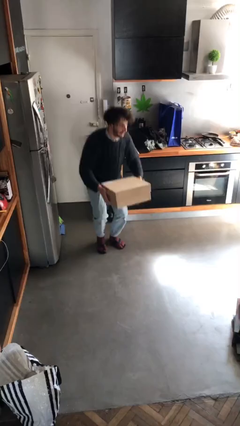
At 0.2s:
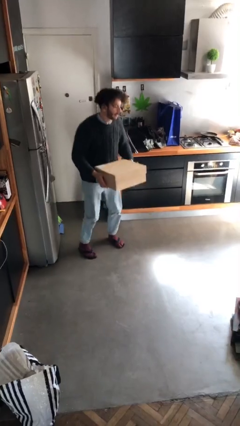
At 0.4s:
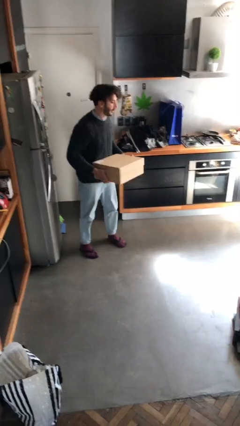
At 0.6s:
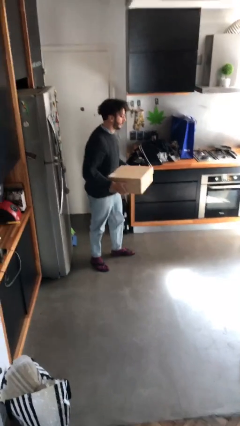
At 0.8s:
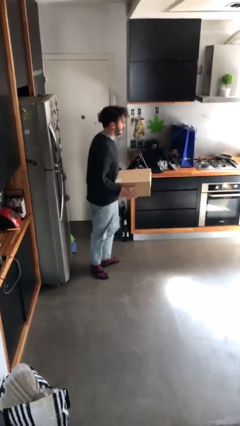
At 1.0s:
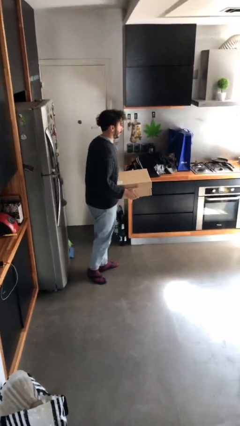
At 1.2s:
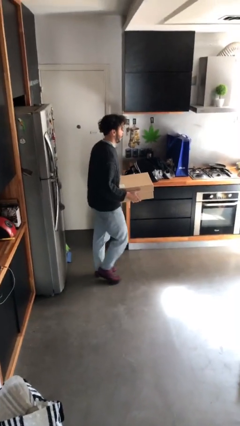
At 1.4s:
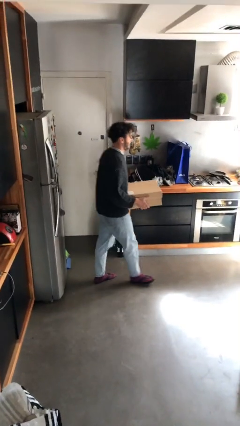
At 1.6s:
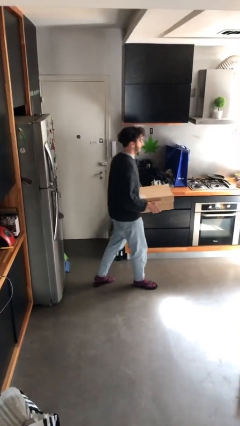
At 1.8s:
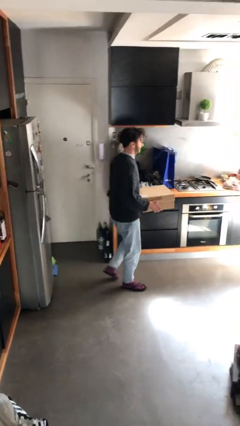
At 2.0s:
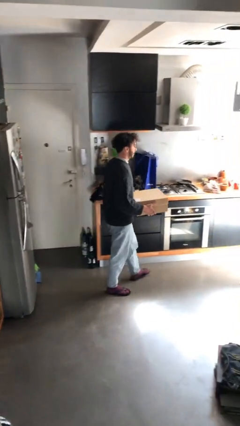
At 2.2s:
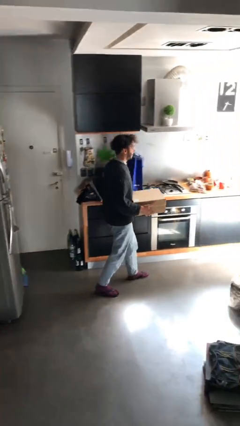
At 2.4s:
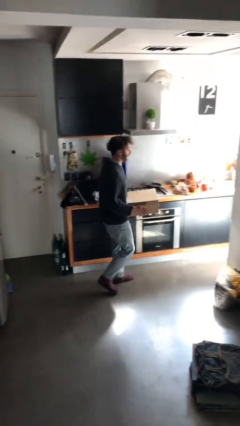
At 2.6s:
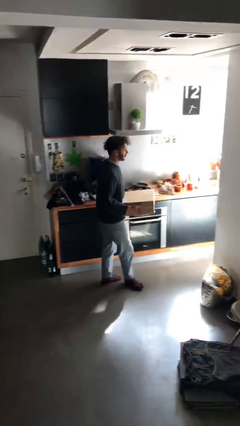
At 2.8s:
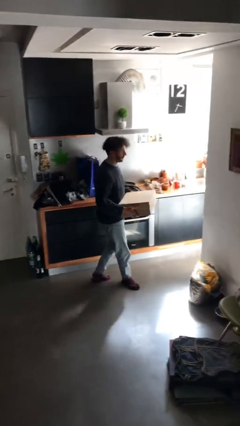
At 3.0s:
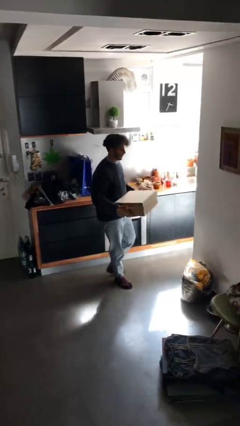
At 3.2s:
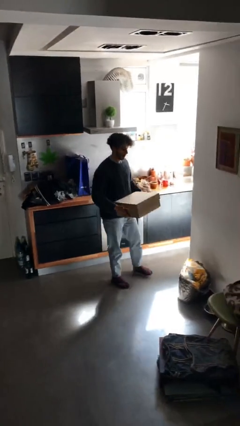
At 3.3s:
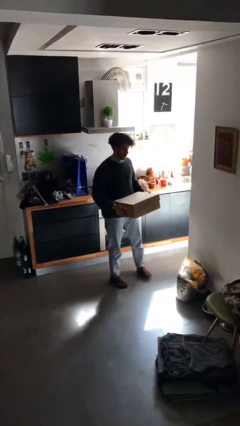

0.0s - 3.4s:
person carries heavy object

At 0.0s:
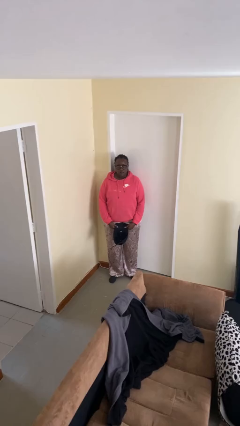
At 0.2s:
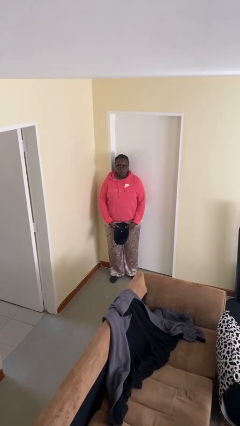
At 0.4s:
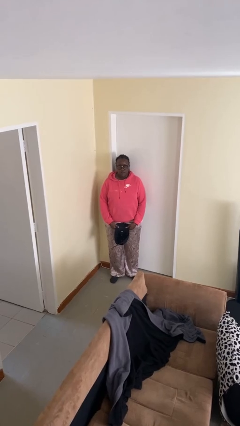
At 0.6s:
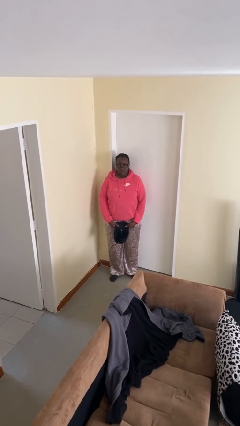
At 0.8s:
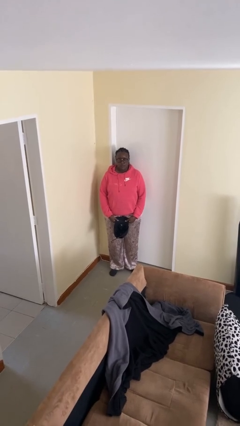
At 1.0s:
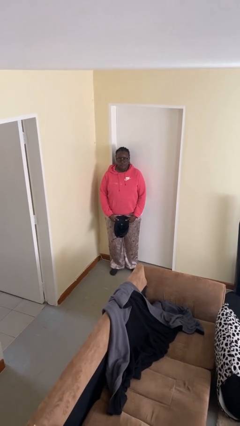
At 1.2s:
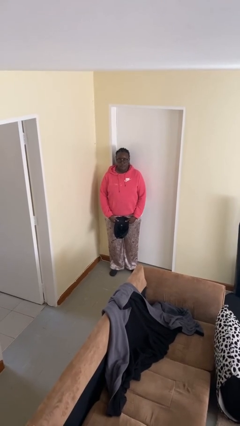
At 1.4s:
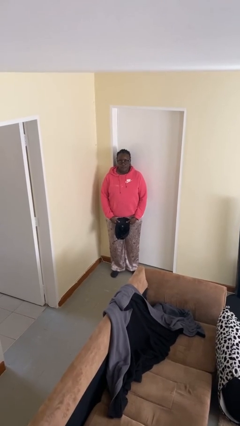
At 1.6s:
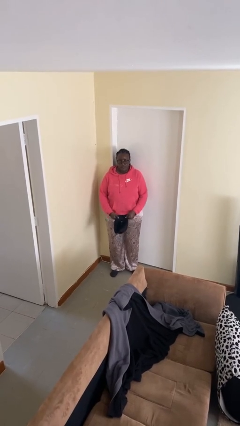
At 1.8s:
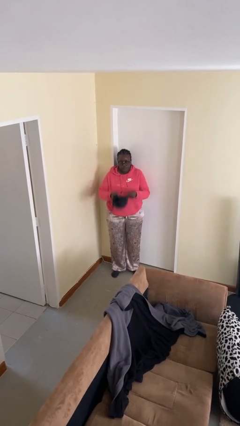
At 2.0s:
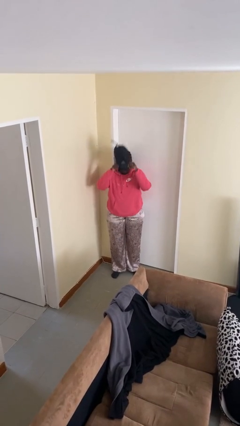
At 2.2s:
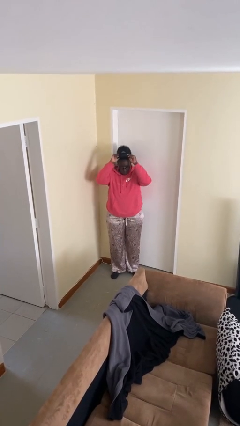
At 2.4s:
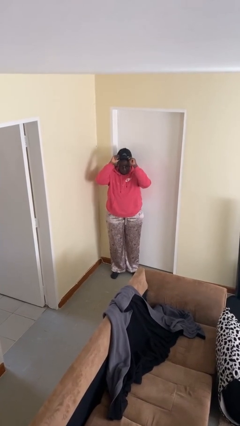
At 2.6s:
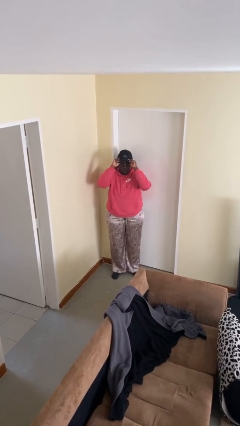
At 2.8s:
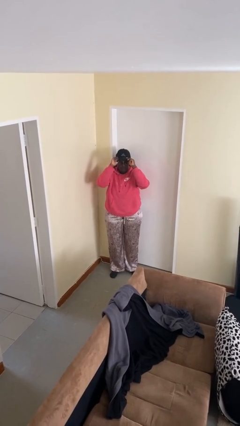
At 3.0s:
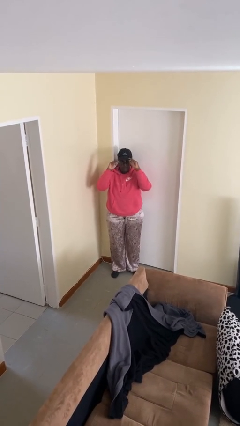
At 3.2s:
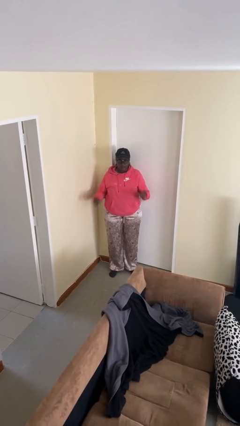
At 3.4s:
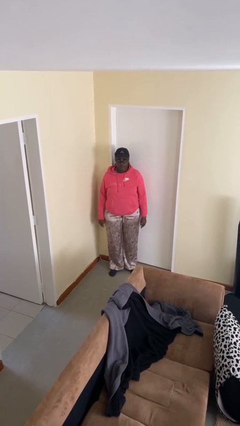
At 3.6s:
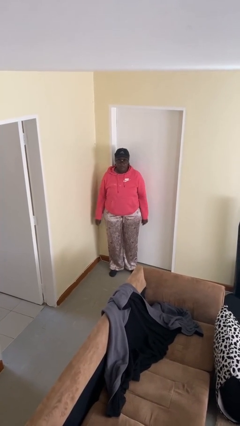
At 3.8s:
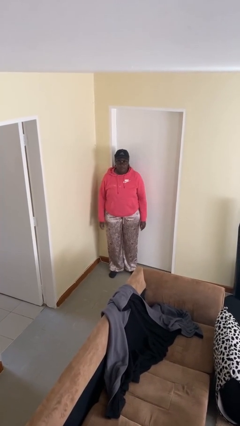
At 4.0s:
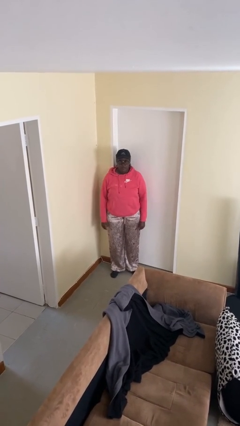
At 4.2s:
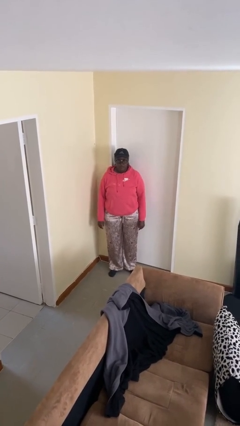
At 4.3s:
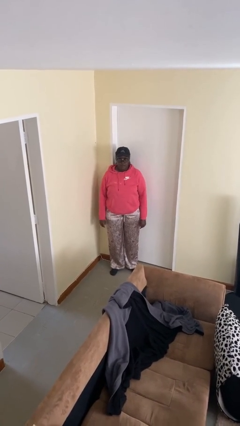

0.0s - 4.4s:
person puts on hat

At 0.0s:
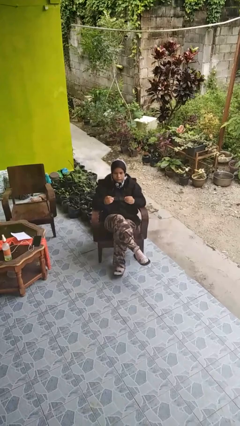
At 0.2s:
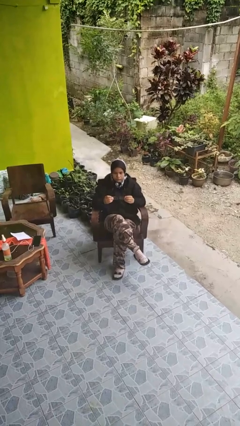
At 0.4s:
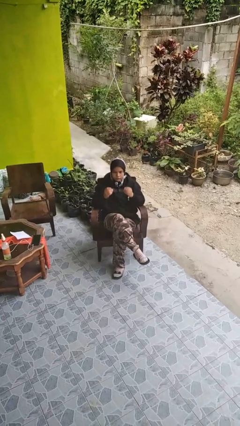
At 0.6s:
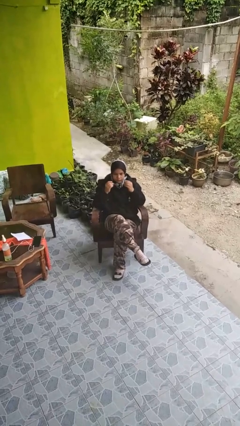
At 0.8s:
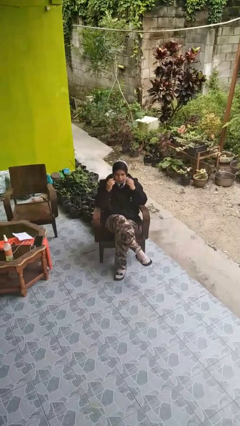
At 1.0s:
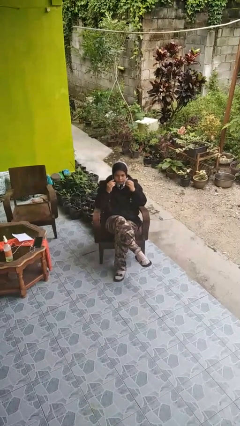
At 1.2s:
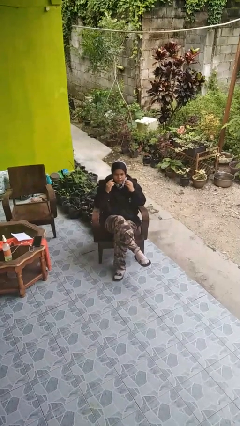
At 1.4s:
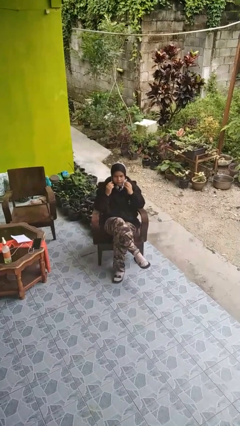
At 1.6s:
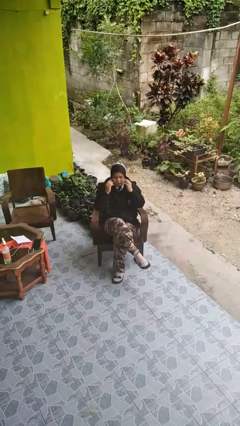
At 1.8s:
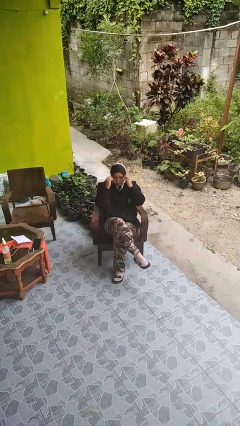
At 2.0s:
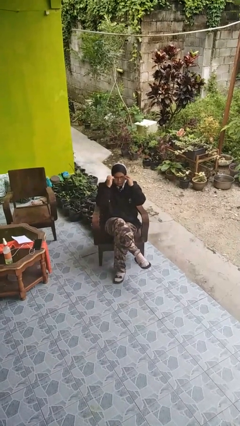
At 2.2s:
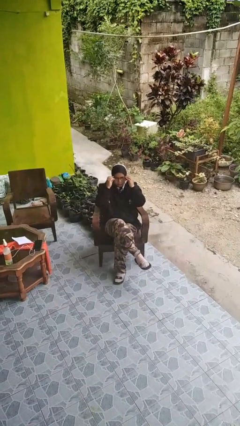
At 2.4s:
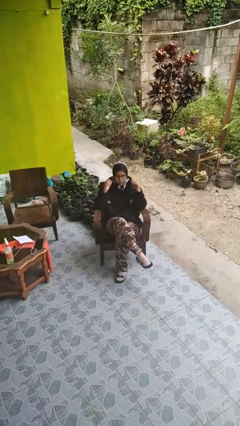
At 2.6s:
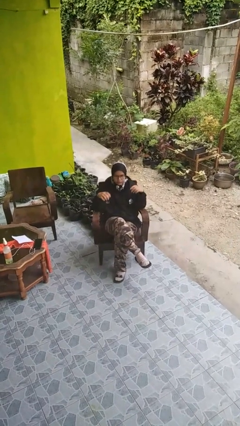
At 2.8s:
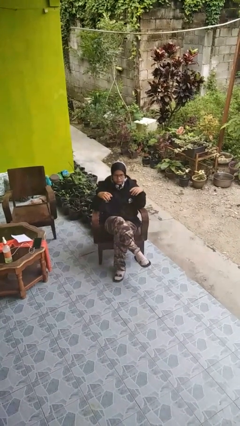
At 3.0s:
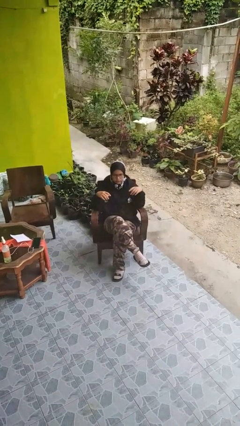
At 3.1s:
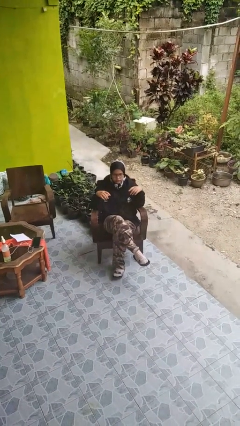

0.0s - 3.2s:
person puts on glasses

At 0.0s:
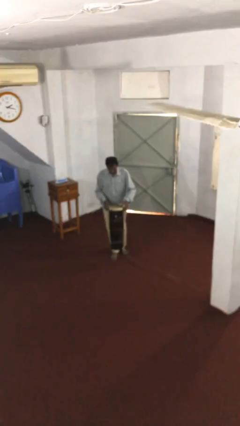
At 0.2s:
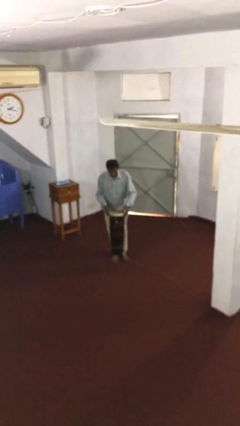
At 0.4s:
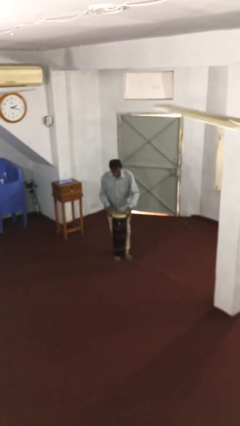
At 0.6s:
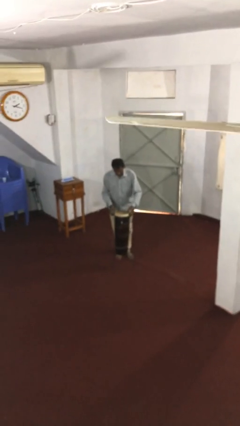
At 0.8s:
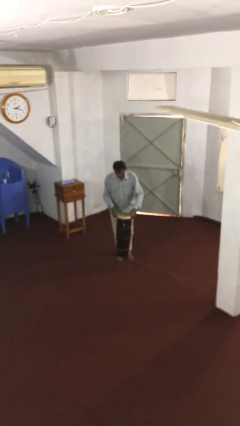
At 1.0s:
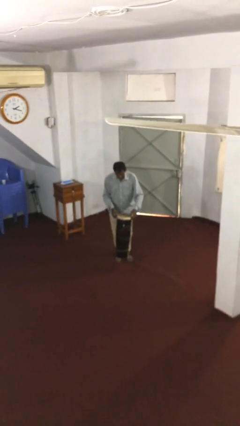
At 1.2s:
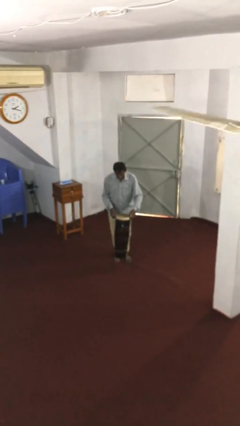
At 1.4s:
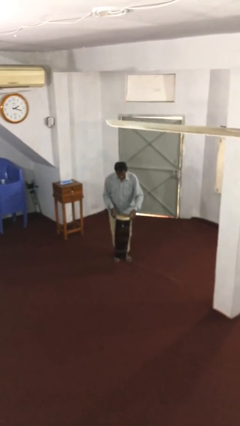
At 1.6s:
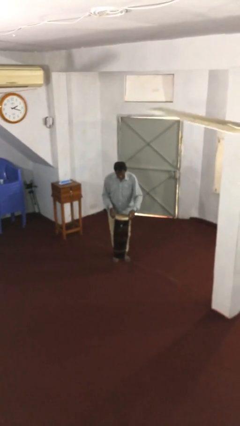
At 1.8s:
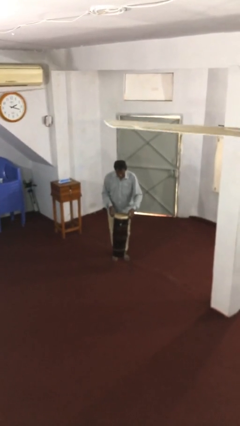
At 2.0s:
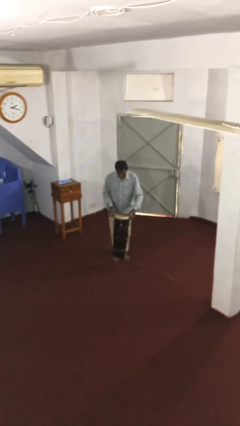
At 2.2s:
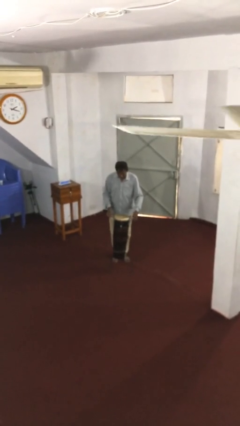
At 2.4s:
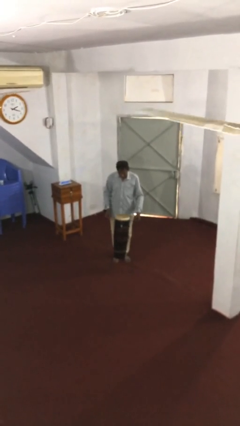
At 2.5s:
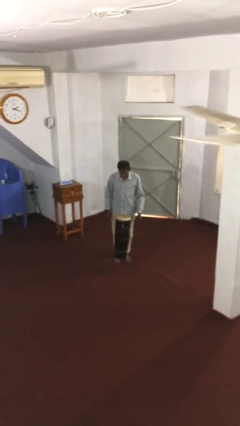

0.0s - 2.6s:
person puts down object on floor

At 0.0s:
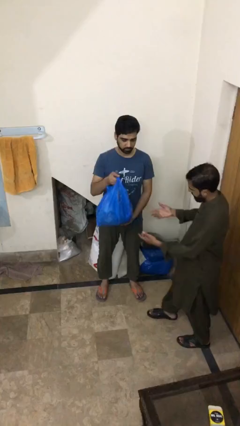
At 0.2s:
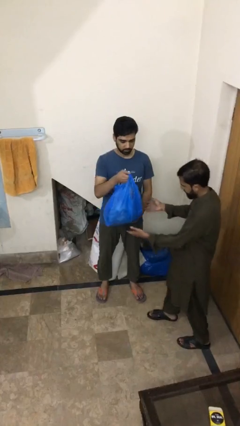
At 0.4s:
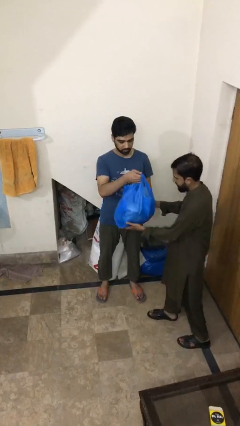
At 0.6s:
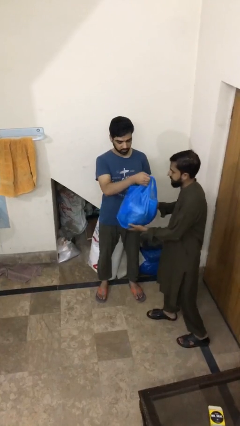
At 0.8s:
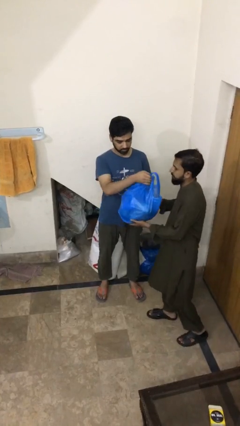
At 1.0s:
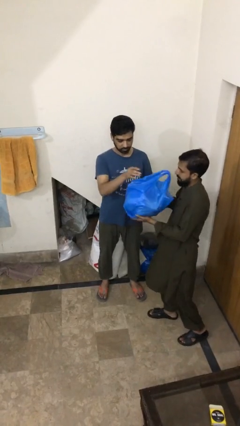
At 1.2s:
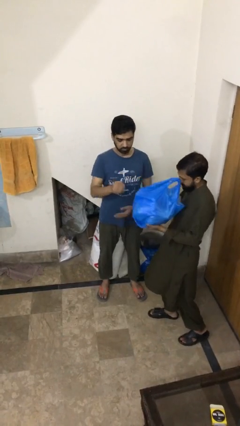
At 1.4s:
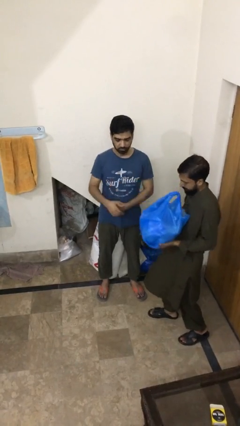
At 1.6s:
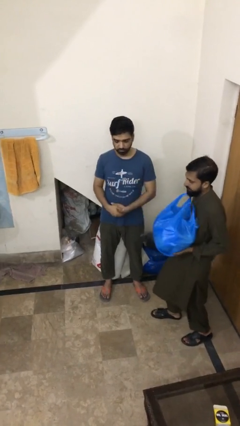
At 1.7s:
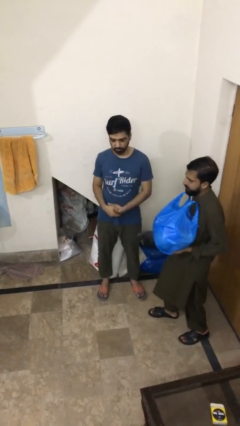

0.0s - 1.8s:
person transfers object to person

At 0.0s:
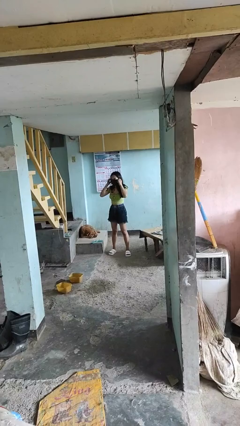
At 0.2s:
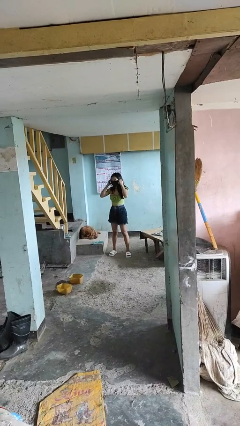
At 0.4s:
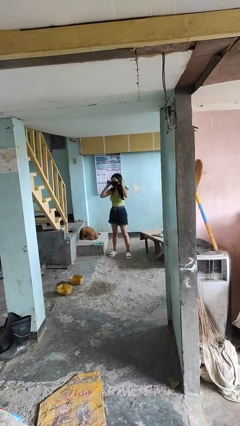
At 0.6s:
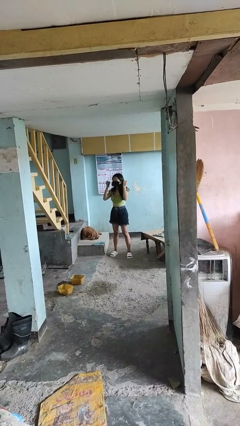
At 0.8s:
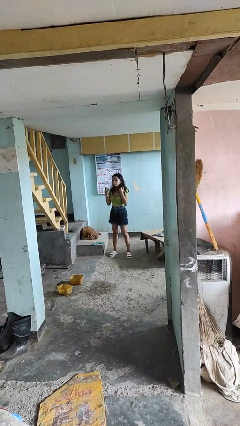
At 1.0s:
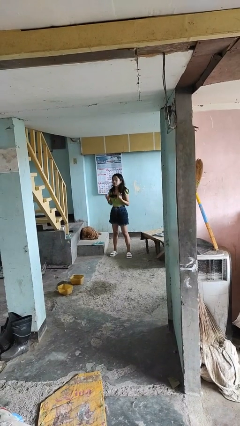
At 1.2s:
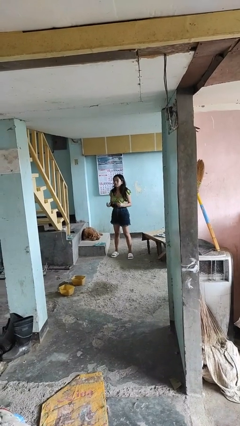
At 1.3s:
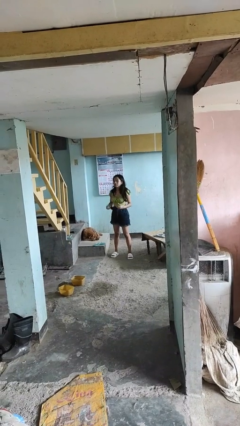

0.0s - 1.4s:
person takes off facemask

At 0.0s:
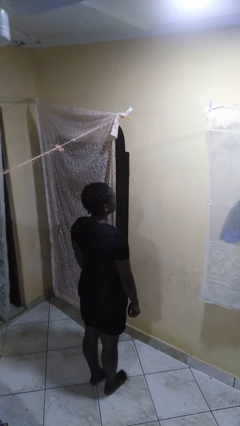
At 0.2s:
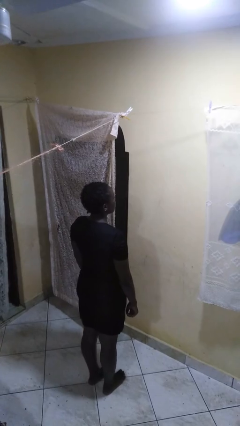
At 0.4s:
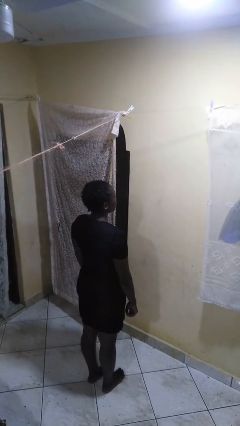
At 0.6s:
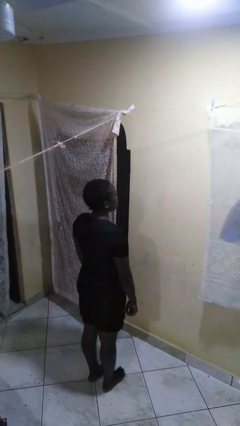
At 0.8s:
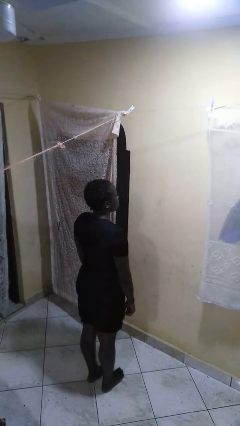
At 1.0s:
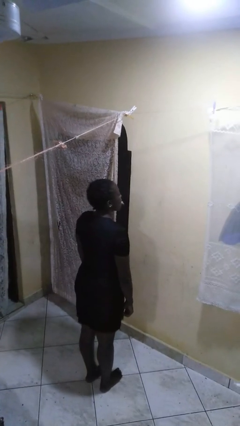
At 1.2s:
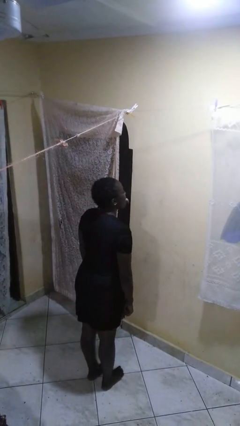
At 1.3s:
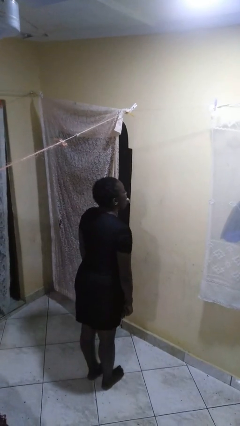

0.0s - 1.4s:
person sticks out tongue
